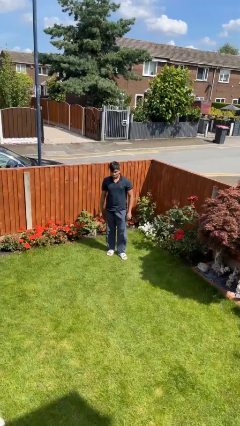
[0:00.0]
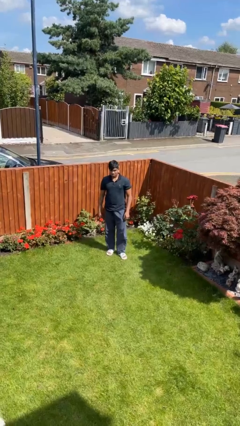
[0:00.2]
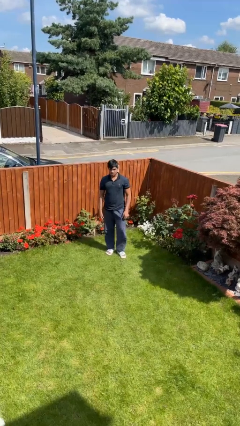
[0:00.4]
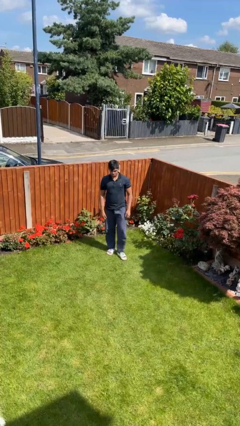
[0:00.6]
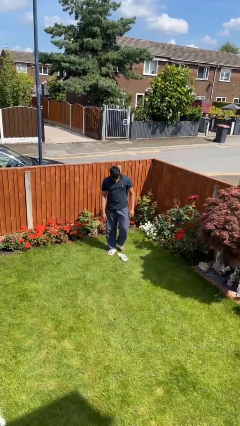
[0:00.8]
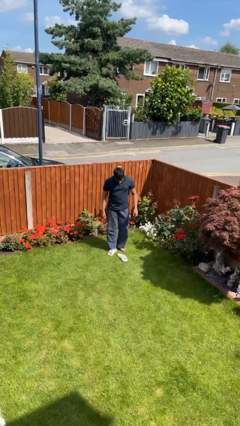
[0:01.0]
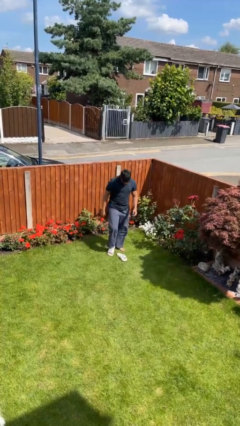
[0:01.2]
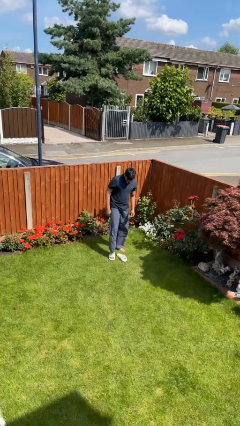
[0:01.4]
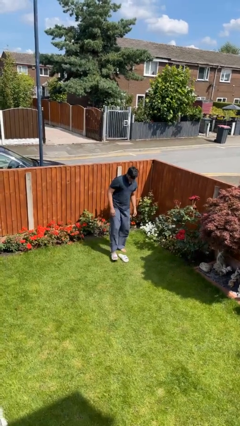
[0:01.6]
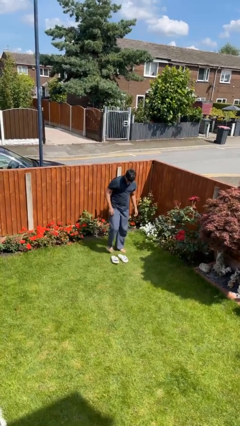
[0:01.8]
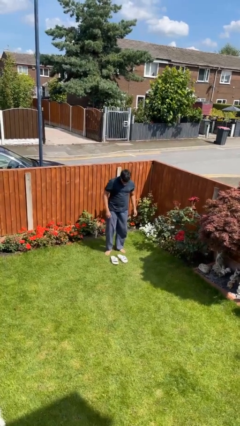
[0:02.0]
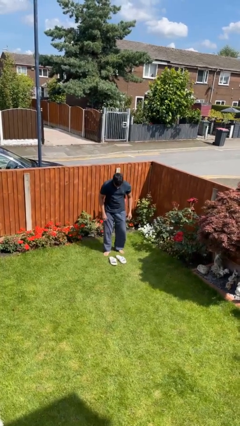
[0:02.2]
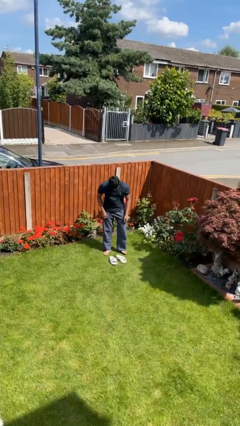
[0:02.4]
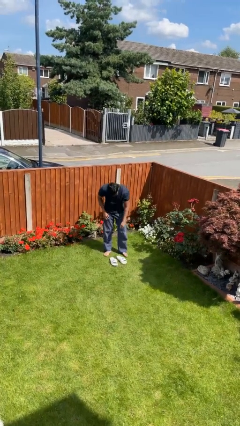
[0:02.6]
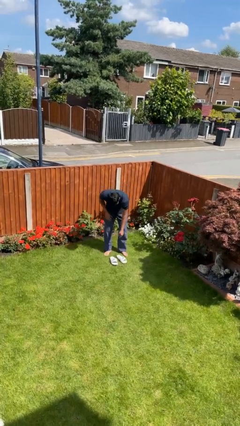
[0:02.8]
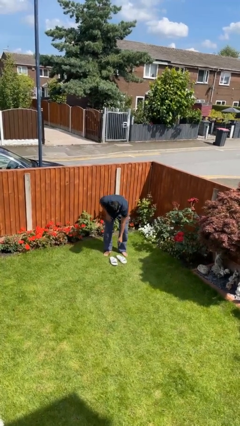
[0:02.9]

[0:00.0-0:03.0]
person takes off shoes

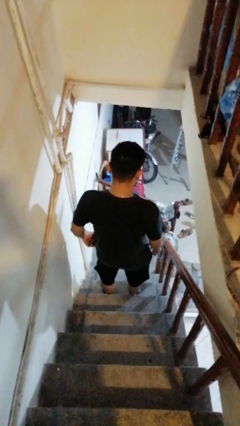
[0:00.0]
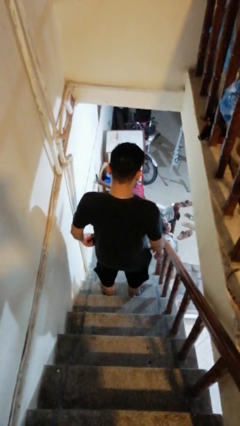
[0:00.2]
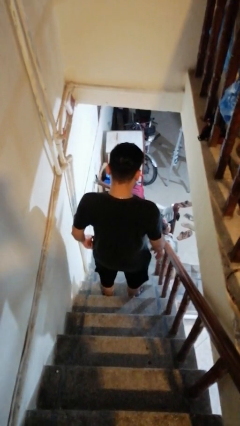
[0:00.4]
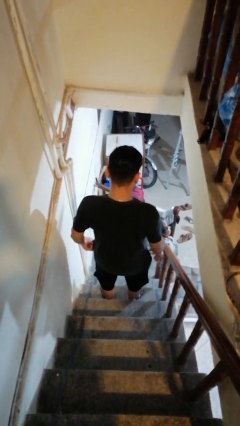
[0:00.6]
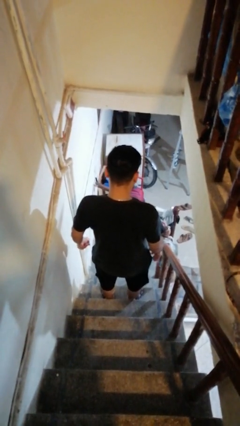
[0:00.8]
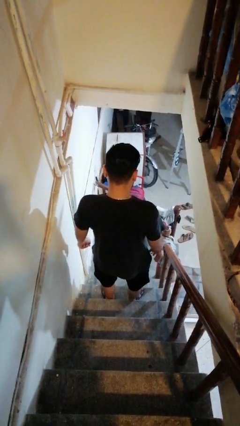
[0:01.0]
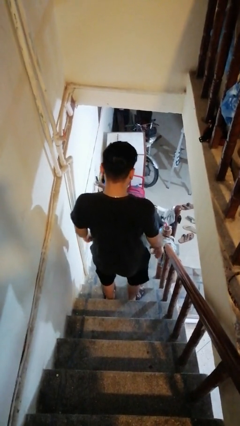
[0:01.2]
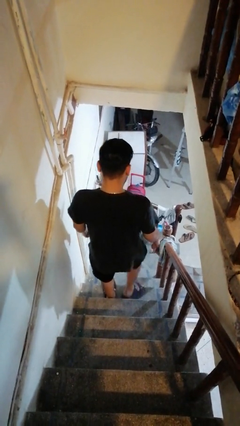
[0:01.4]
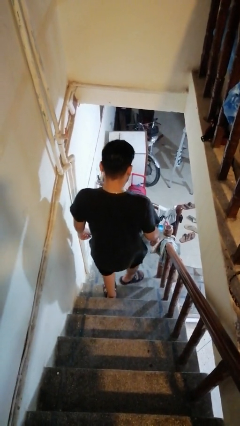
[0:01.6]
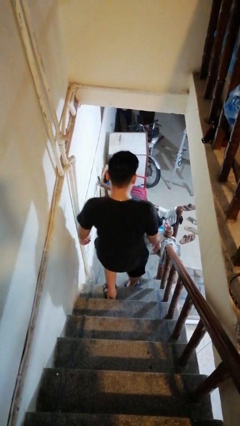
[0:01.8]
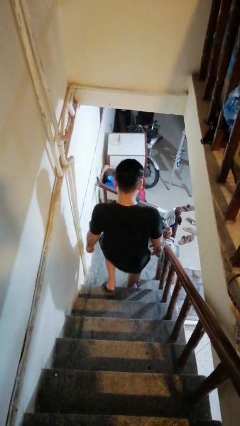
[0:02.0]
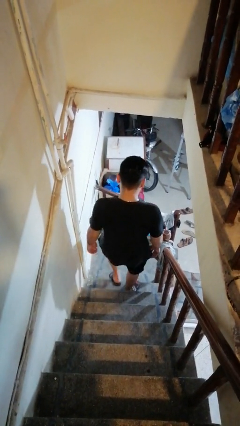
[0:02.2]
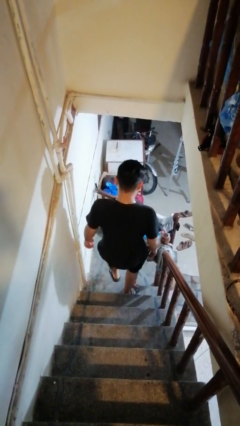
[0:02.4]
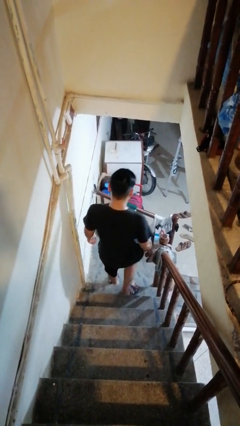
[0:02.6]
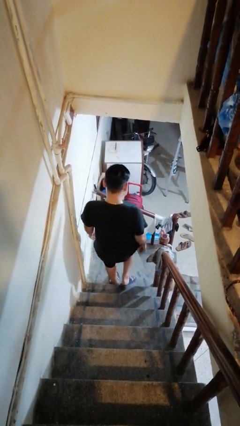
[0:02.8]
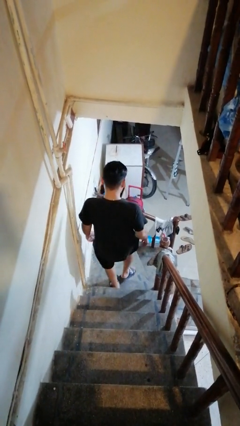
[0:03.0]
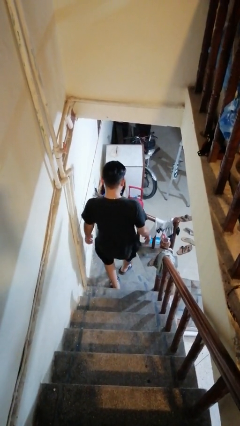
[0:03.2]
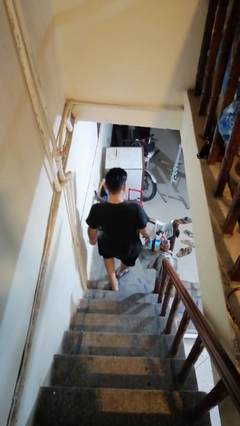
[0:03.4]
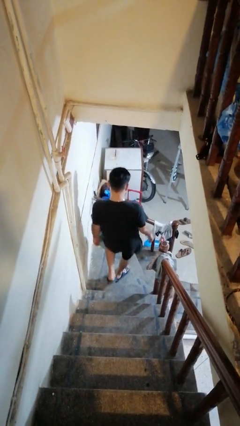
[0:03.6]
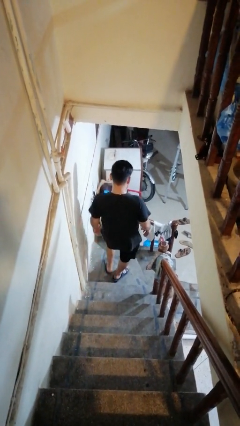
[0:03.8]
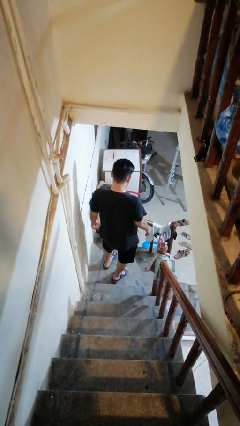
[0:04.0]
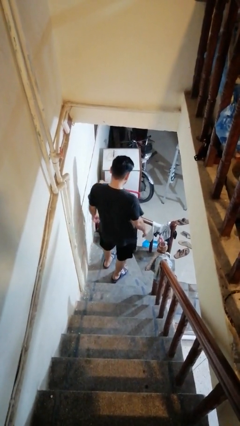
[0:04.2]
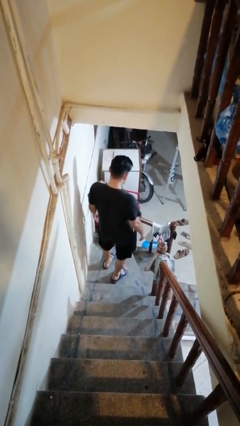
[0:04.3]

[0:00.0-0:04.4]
person climbs down stairs

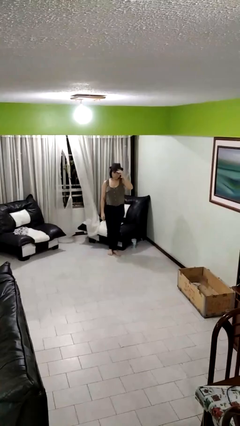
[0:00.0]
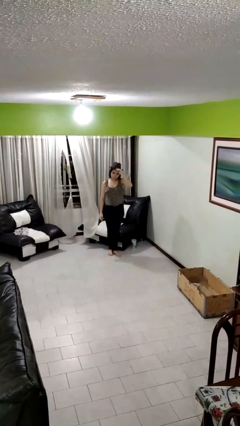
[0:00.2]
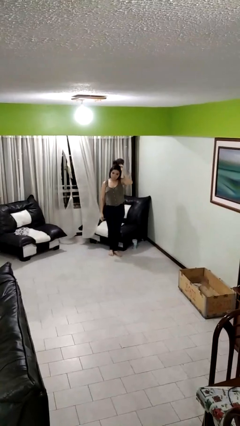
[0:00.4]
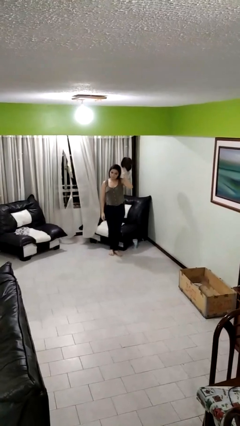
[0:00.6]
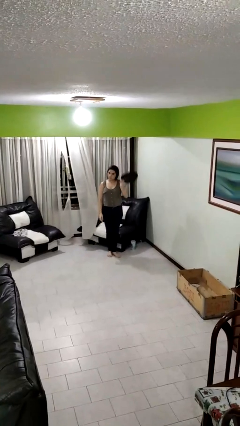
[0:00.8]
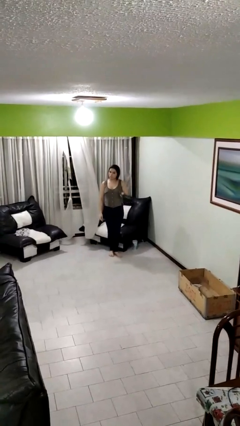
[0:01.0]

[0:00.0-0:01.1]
person takes off hat

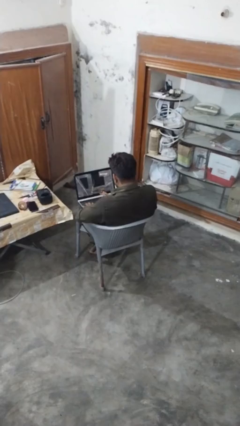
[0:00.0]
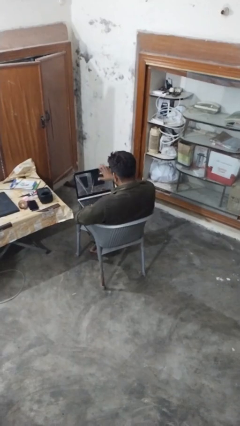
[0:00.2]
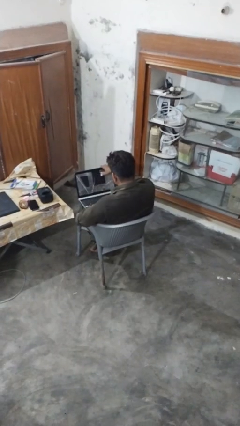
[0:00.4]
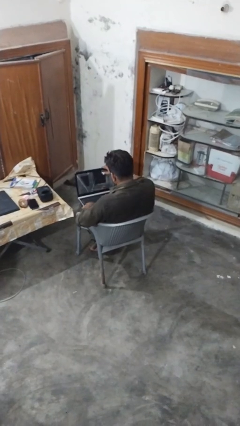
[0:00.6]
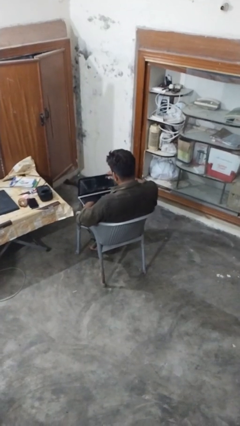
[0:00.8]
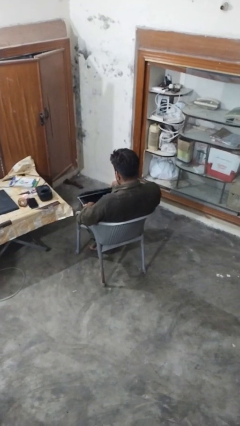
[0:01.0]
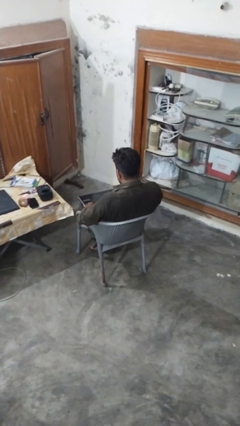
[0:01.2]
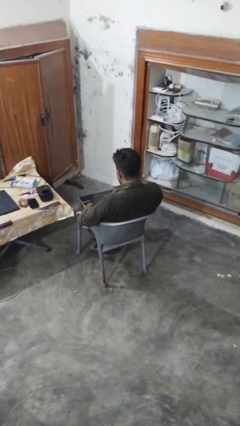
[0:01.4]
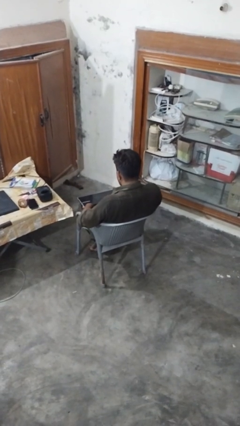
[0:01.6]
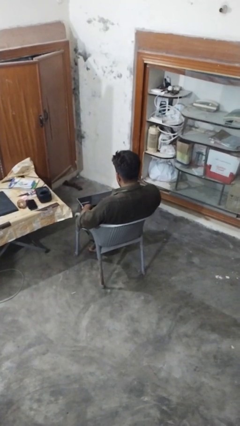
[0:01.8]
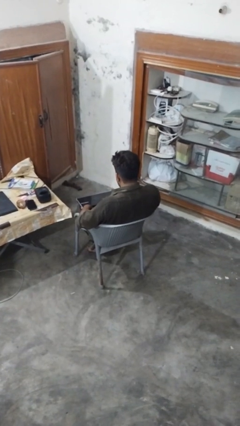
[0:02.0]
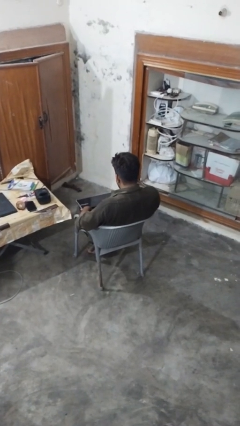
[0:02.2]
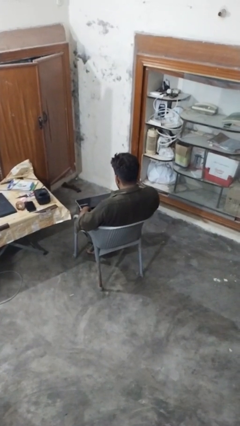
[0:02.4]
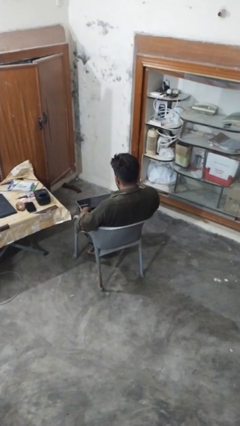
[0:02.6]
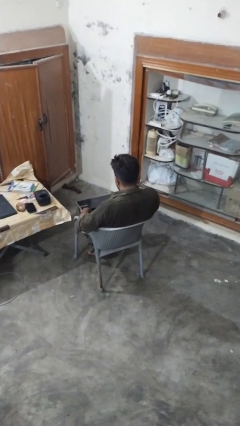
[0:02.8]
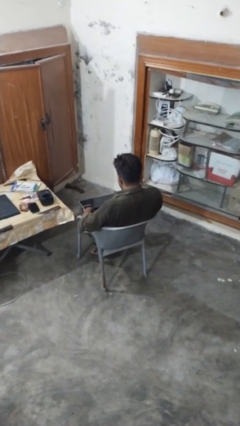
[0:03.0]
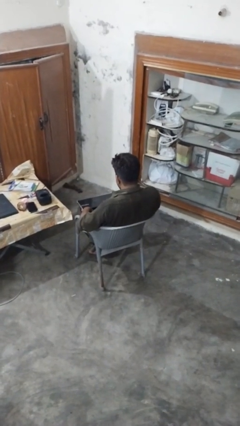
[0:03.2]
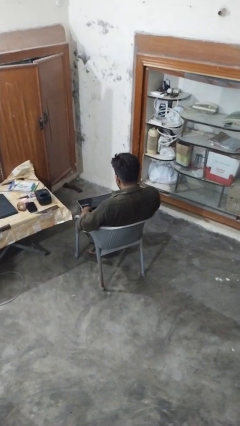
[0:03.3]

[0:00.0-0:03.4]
person closes laptop

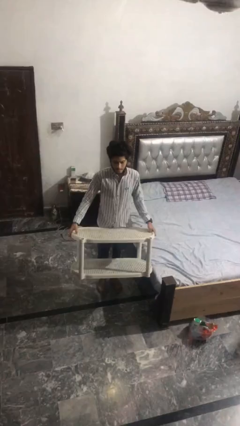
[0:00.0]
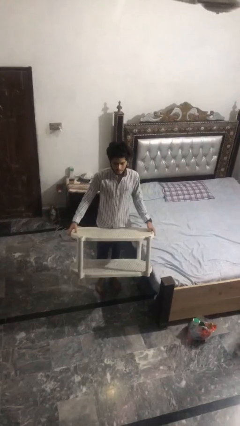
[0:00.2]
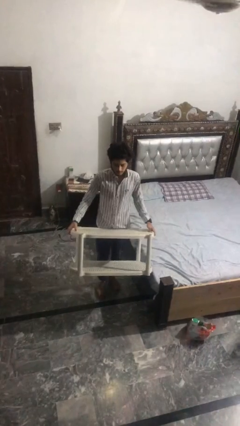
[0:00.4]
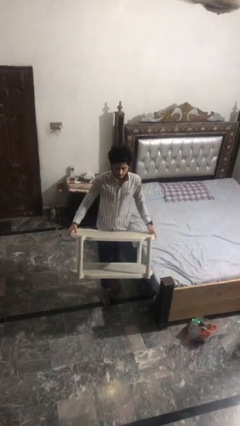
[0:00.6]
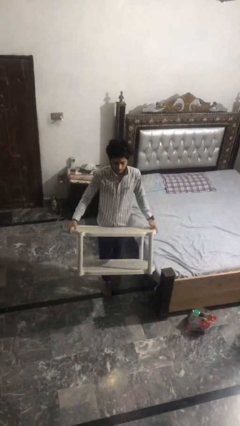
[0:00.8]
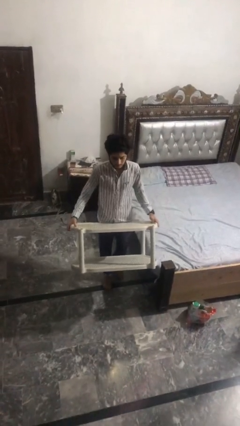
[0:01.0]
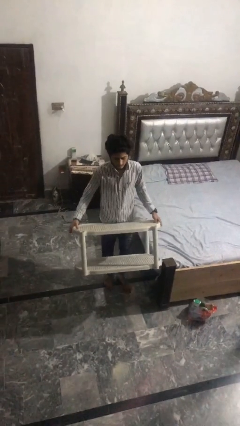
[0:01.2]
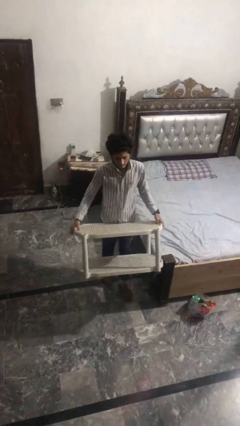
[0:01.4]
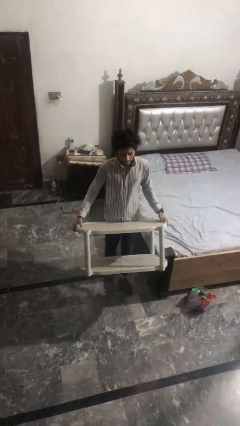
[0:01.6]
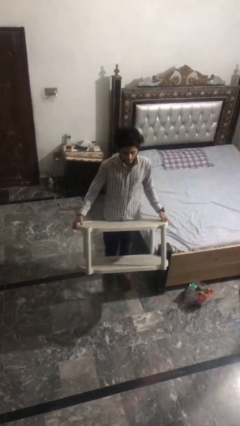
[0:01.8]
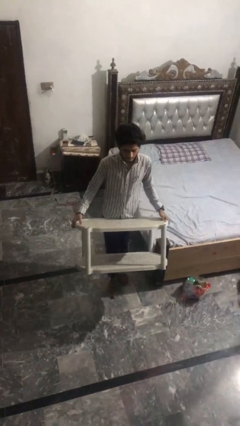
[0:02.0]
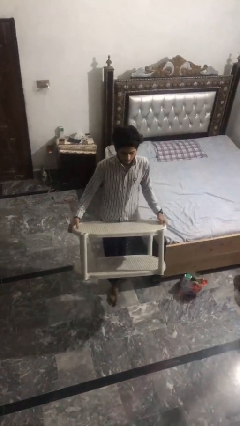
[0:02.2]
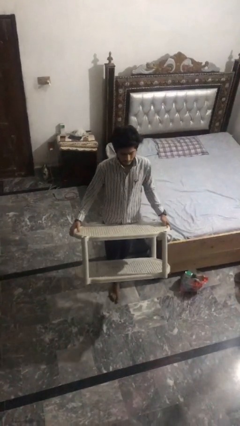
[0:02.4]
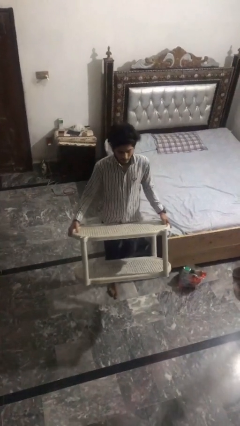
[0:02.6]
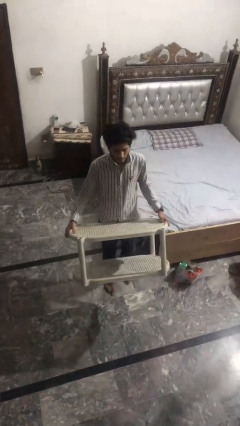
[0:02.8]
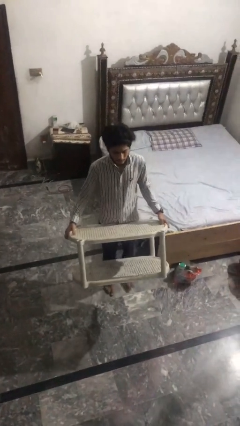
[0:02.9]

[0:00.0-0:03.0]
person carries furniture

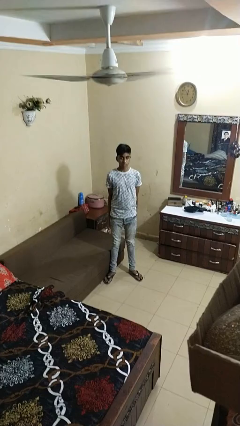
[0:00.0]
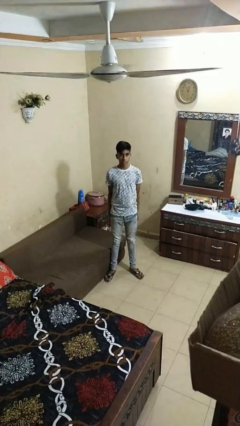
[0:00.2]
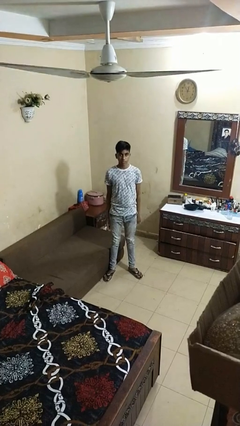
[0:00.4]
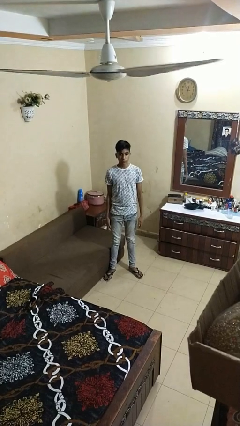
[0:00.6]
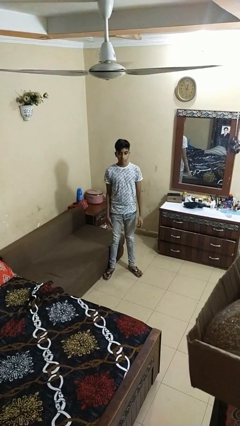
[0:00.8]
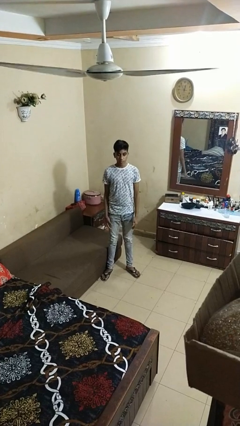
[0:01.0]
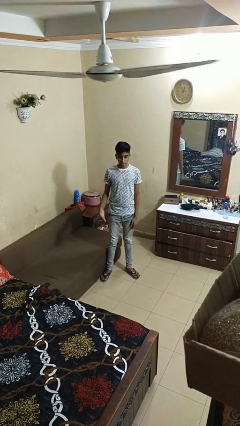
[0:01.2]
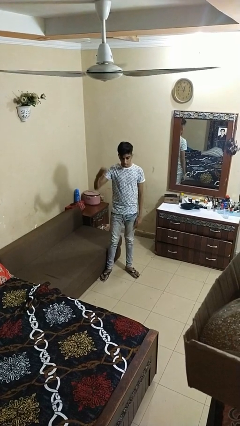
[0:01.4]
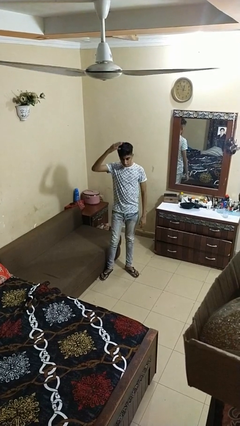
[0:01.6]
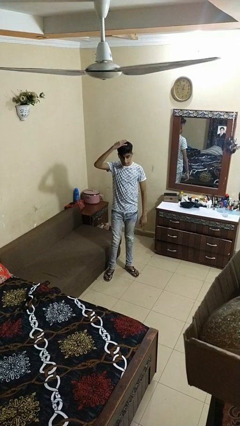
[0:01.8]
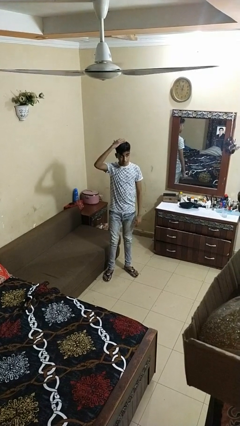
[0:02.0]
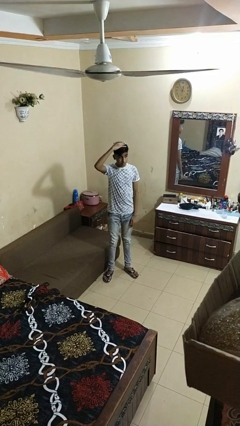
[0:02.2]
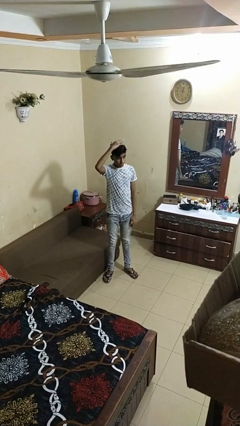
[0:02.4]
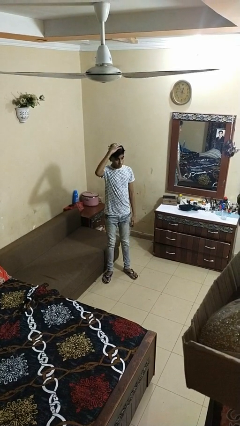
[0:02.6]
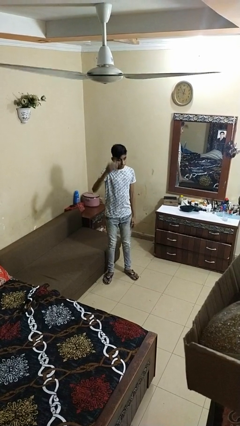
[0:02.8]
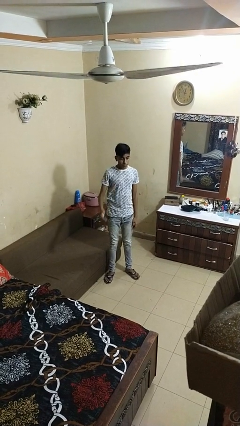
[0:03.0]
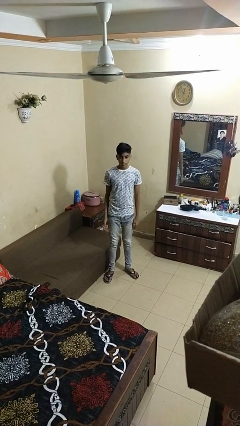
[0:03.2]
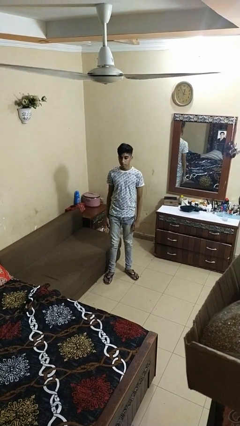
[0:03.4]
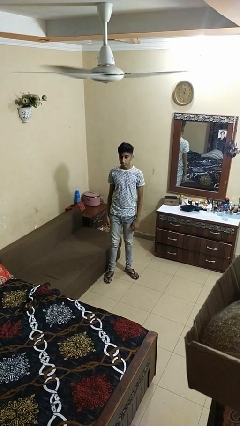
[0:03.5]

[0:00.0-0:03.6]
person pats head
